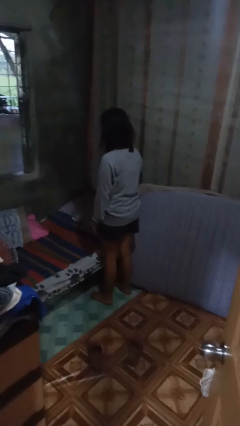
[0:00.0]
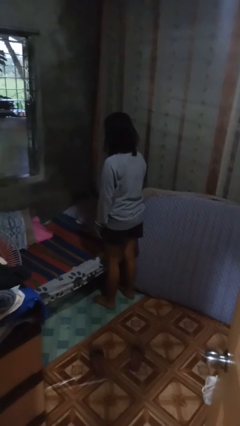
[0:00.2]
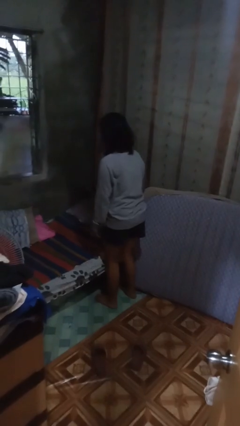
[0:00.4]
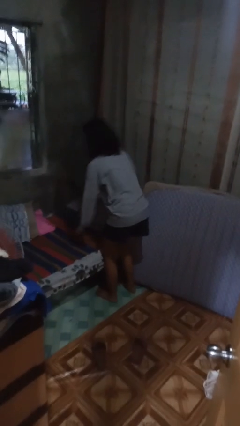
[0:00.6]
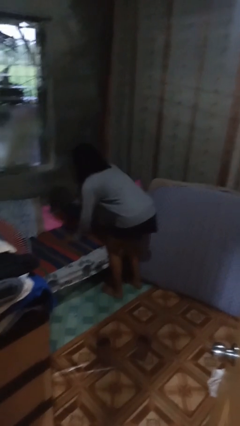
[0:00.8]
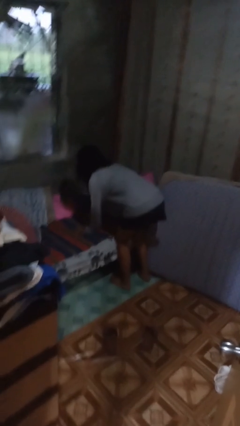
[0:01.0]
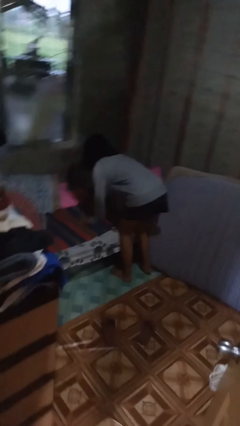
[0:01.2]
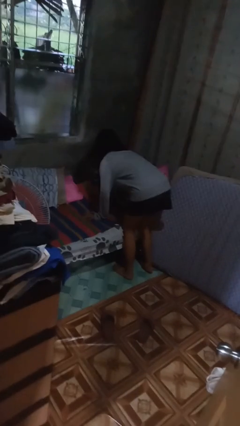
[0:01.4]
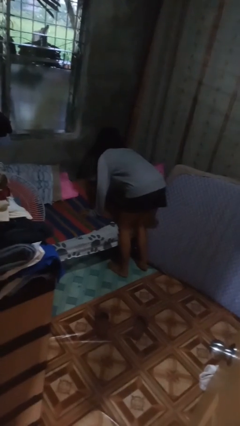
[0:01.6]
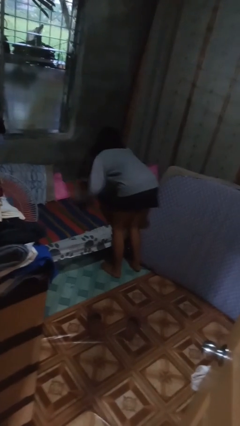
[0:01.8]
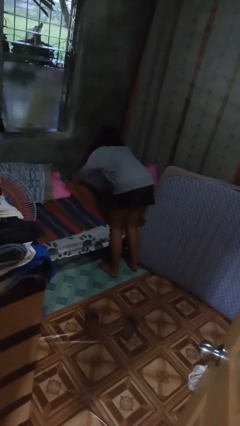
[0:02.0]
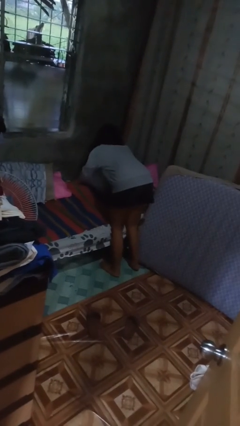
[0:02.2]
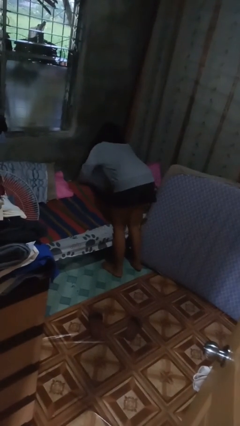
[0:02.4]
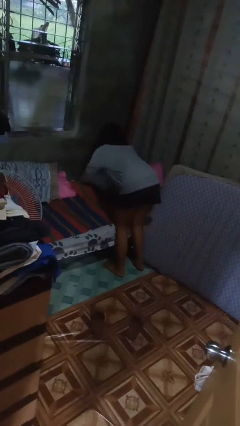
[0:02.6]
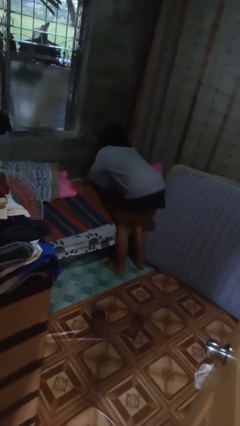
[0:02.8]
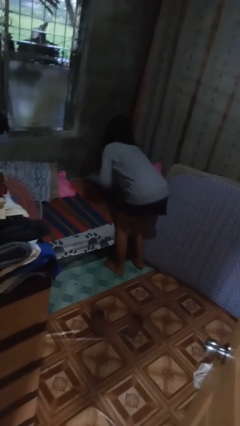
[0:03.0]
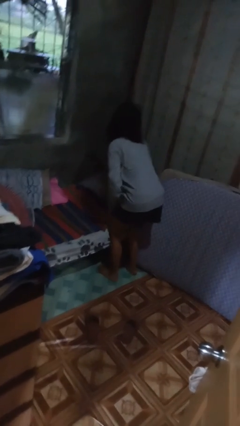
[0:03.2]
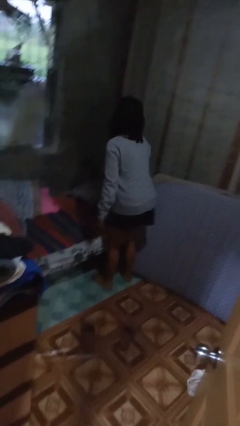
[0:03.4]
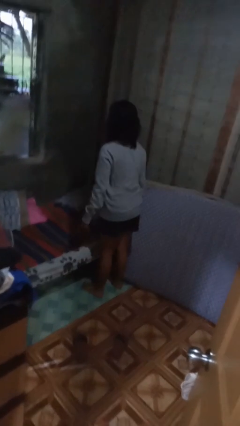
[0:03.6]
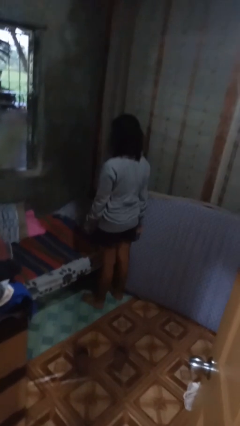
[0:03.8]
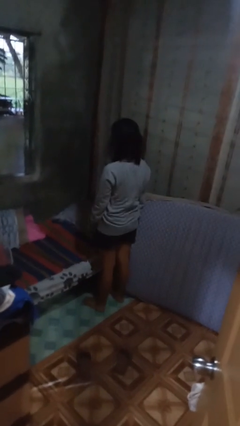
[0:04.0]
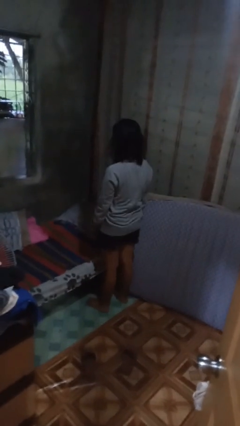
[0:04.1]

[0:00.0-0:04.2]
person searches under bed

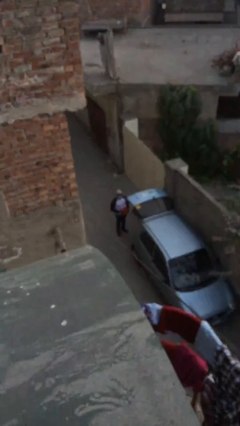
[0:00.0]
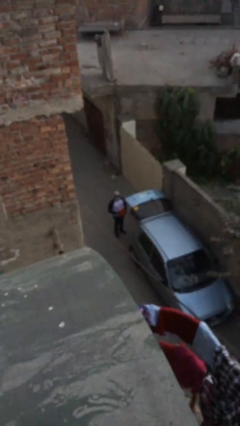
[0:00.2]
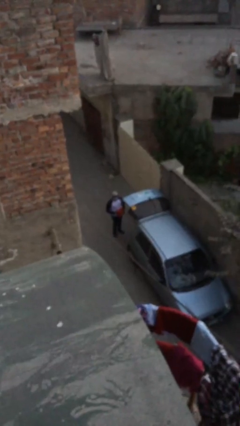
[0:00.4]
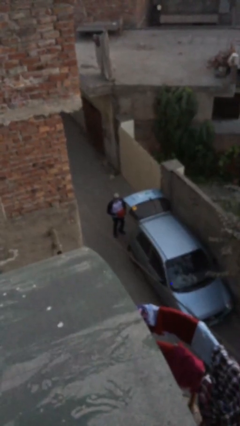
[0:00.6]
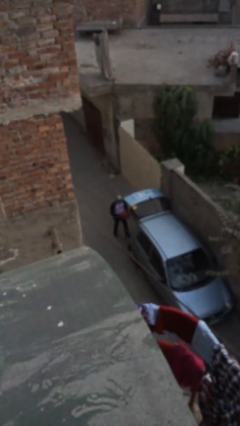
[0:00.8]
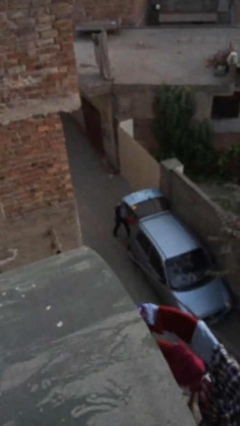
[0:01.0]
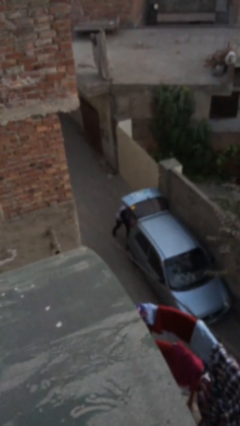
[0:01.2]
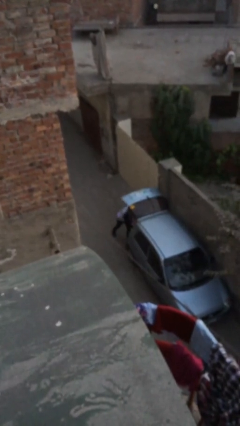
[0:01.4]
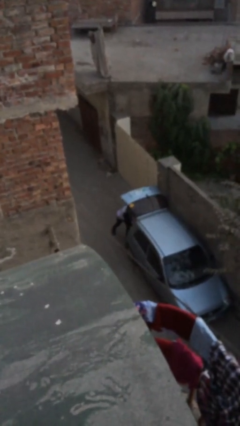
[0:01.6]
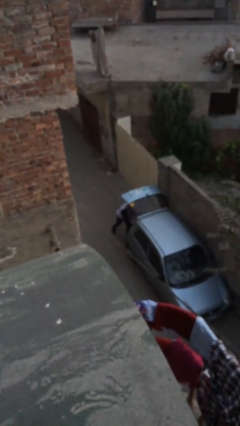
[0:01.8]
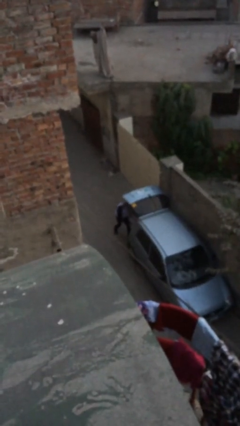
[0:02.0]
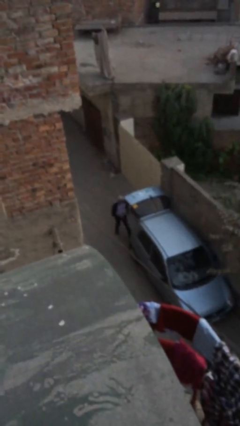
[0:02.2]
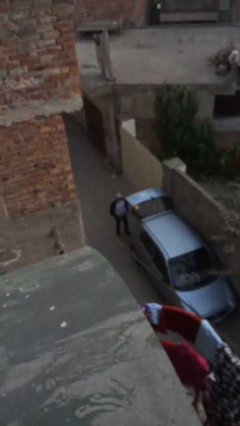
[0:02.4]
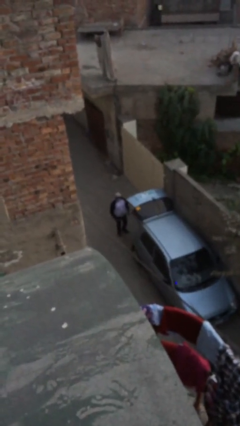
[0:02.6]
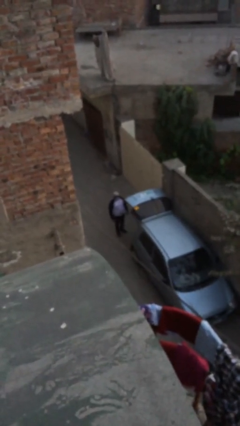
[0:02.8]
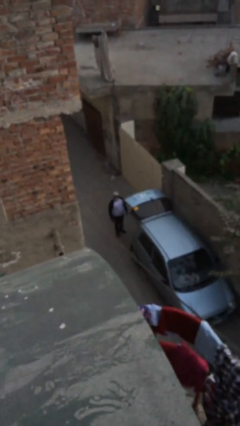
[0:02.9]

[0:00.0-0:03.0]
person loads car

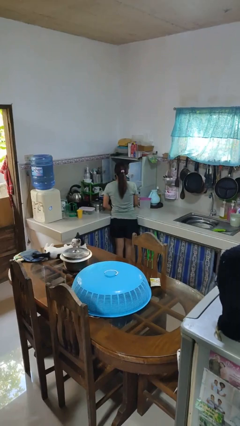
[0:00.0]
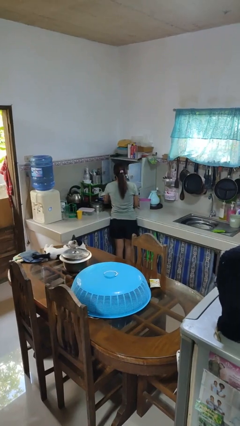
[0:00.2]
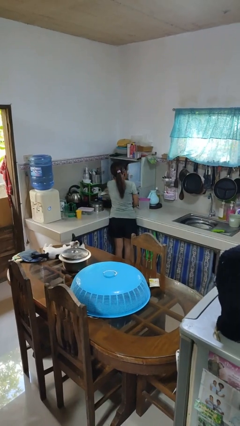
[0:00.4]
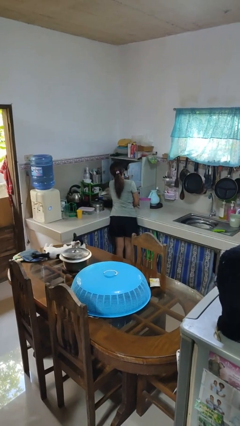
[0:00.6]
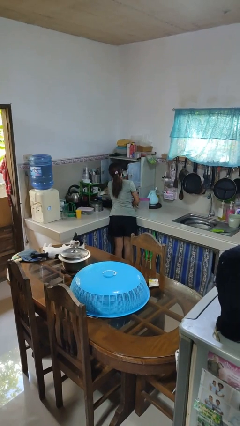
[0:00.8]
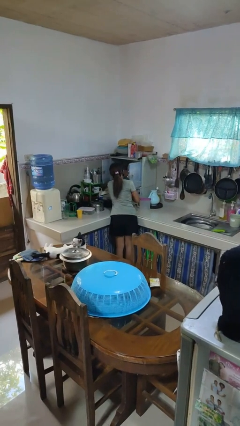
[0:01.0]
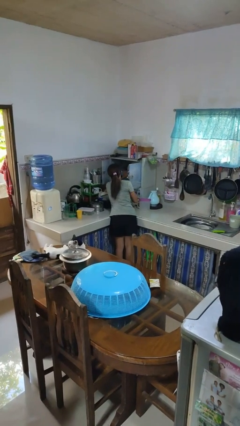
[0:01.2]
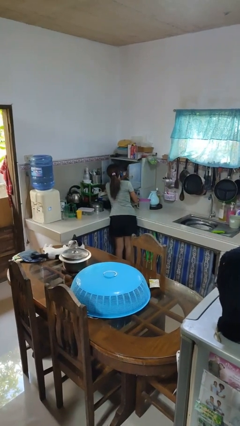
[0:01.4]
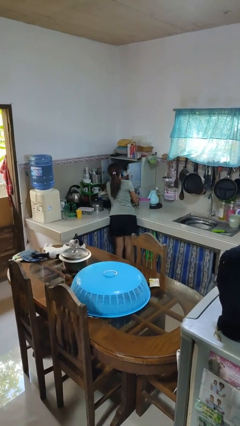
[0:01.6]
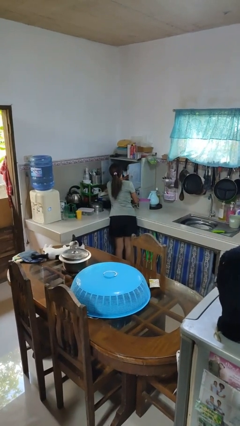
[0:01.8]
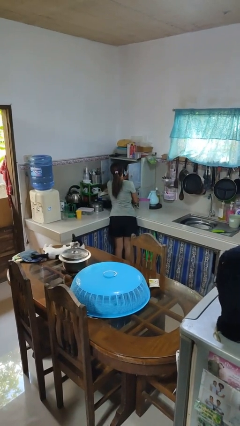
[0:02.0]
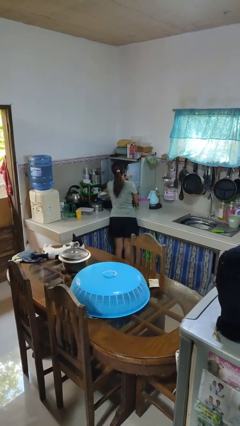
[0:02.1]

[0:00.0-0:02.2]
person searches in kitchen drawer

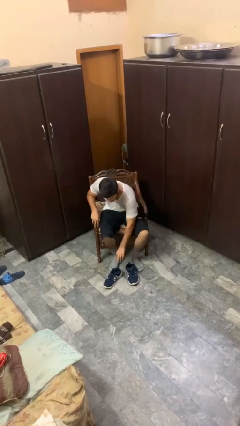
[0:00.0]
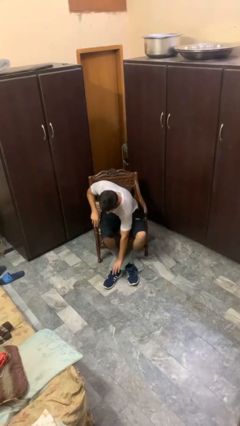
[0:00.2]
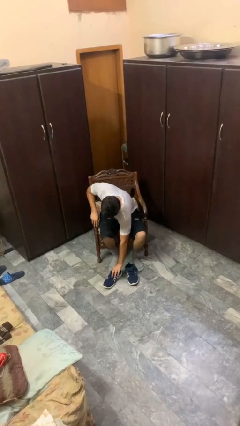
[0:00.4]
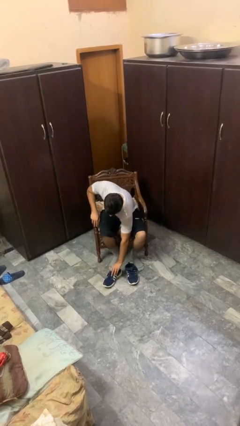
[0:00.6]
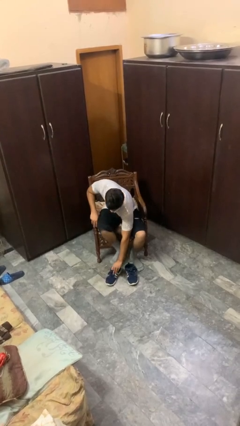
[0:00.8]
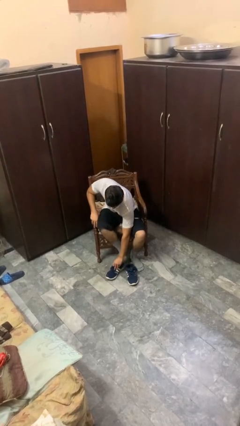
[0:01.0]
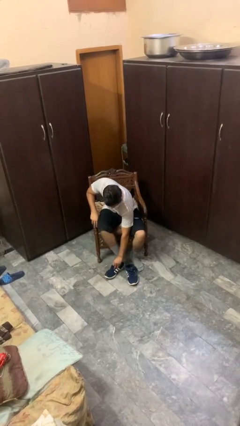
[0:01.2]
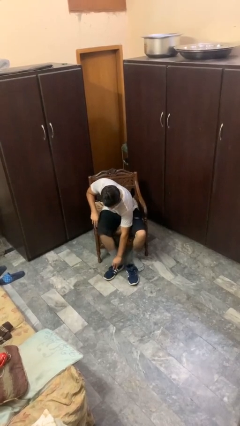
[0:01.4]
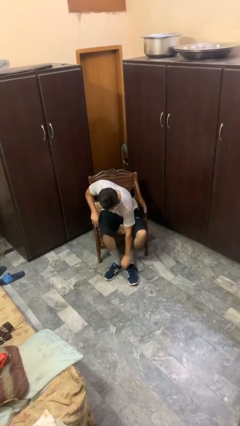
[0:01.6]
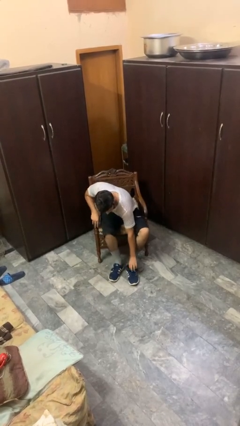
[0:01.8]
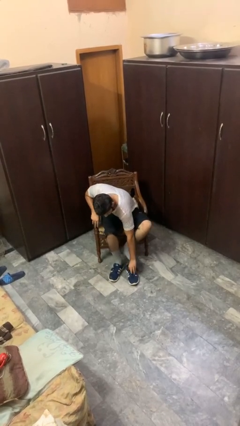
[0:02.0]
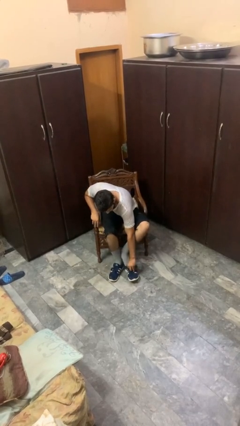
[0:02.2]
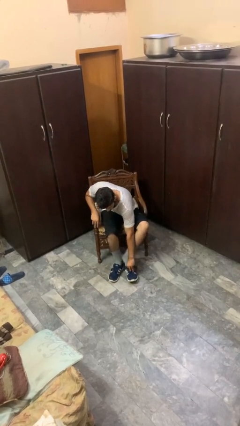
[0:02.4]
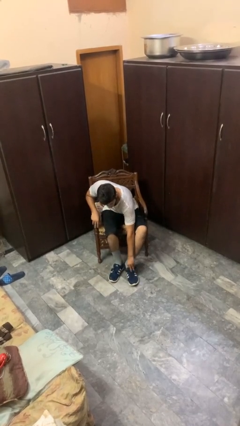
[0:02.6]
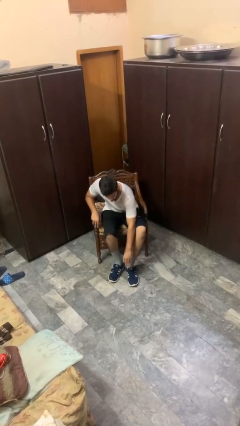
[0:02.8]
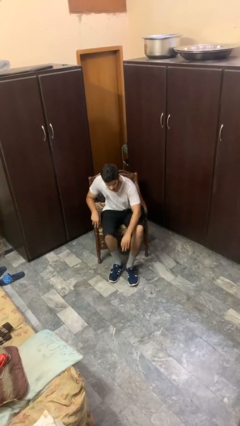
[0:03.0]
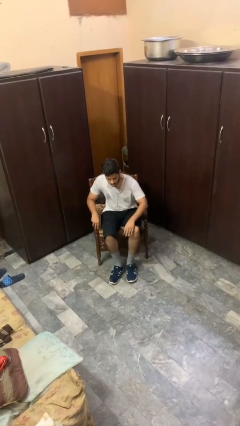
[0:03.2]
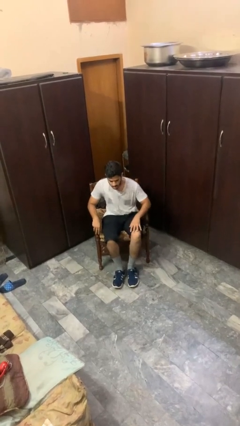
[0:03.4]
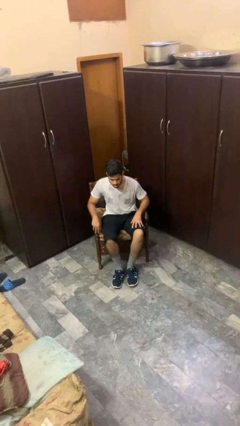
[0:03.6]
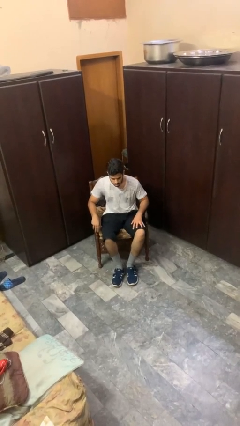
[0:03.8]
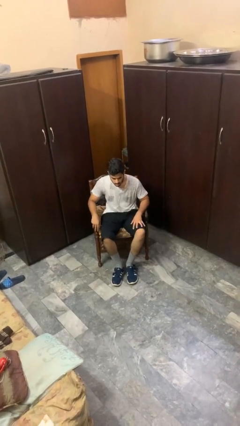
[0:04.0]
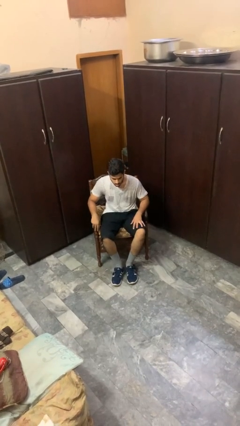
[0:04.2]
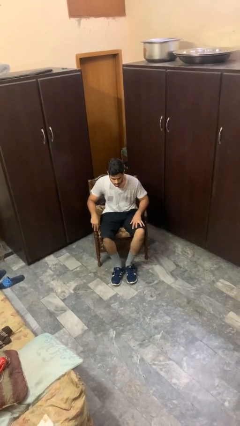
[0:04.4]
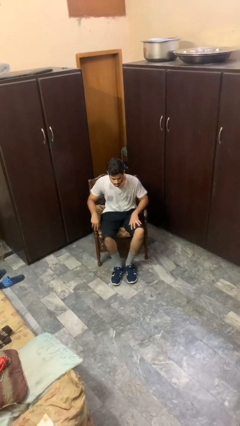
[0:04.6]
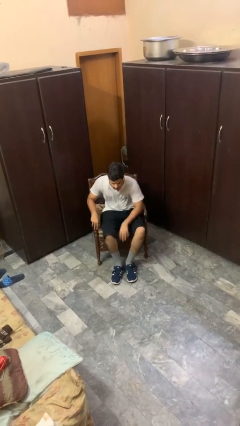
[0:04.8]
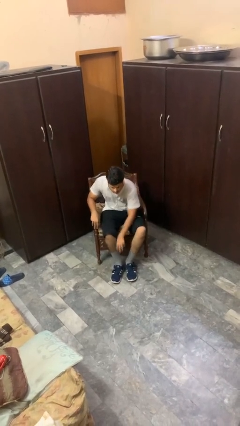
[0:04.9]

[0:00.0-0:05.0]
person puts on shoes

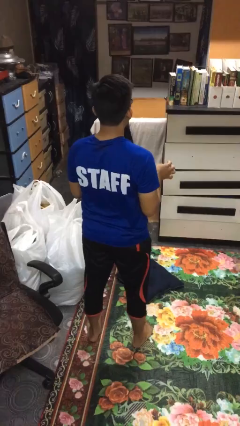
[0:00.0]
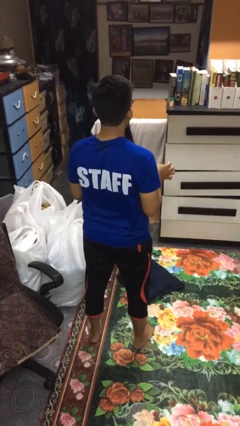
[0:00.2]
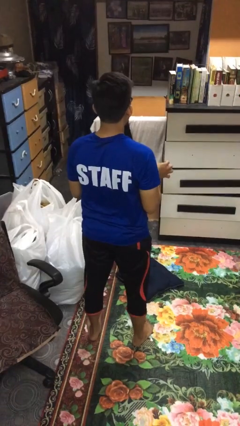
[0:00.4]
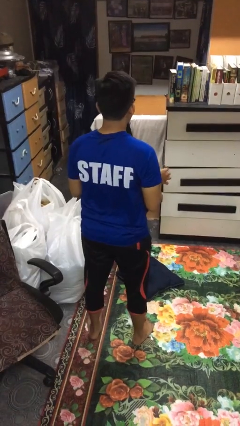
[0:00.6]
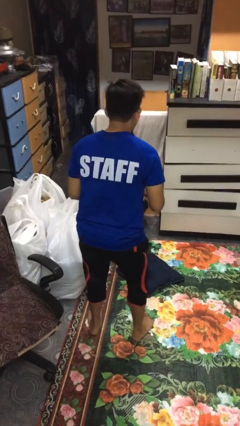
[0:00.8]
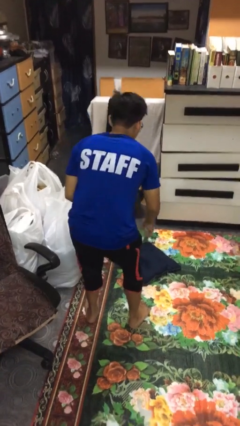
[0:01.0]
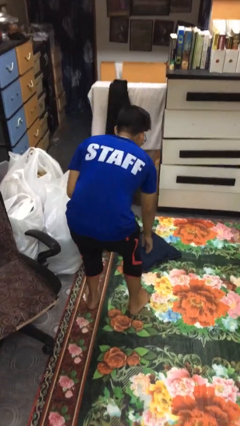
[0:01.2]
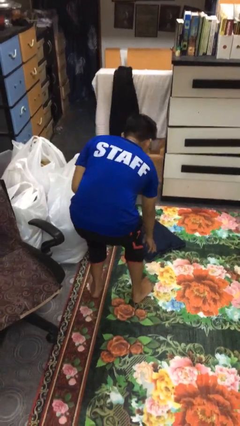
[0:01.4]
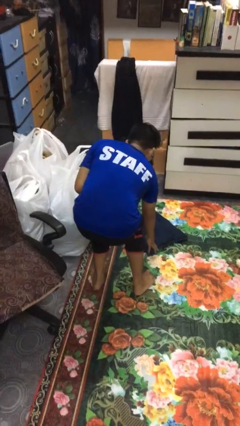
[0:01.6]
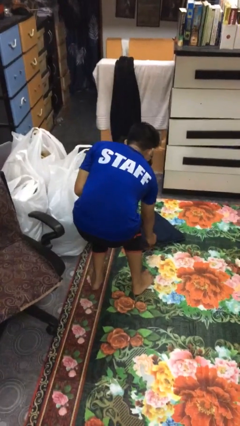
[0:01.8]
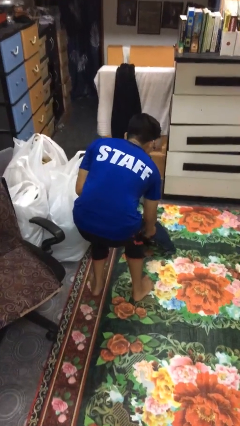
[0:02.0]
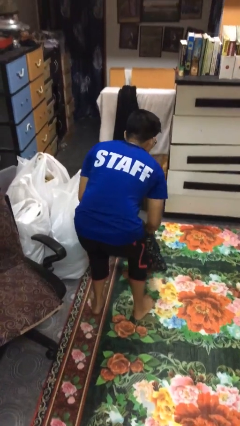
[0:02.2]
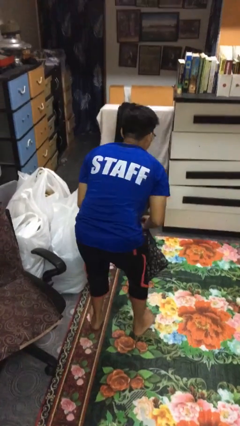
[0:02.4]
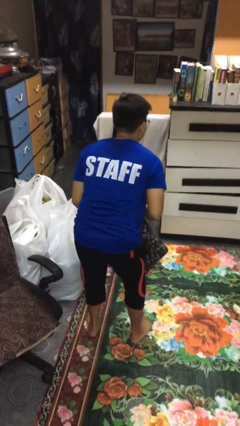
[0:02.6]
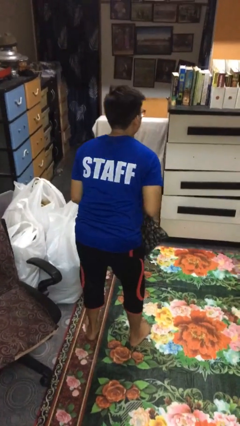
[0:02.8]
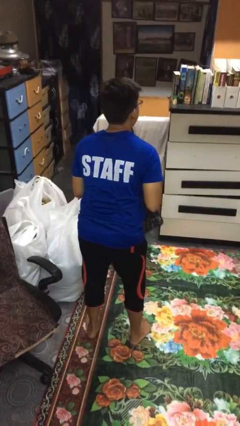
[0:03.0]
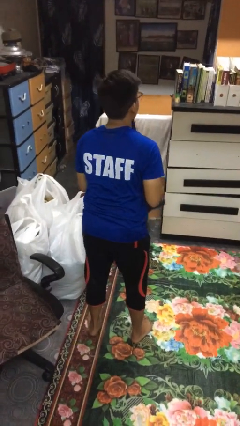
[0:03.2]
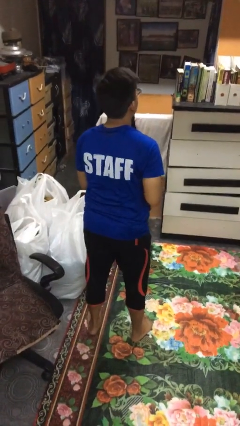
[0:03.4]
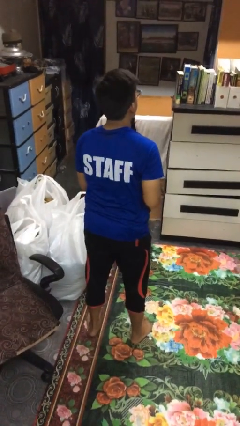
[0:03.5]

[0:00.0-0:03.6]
person picks up object from floor
